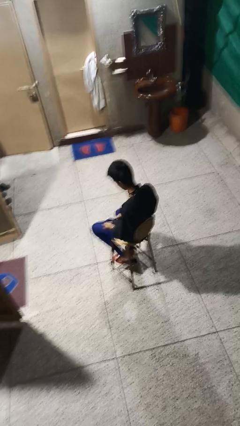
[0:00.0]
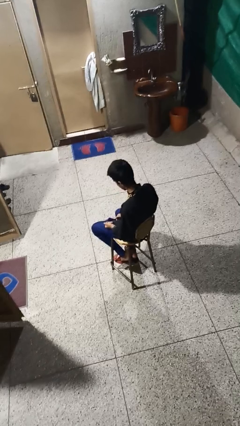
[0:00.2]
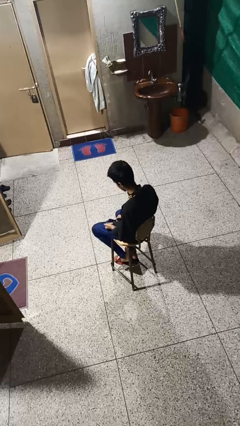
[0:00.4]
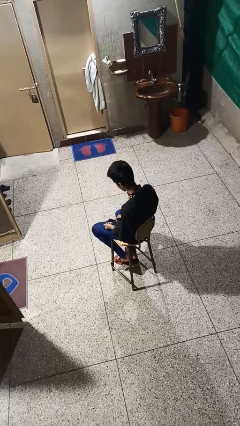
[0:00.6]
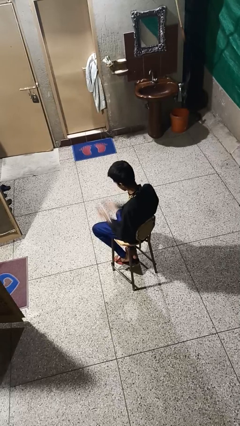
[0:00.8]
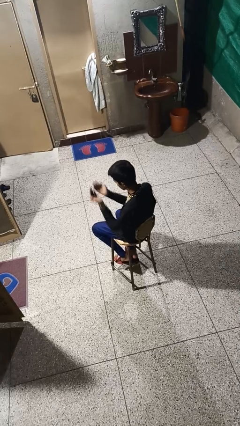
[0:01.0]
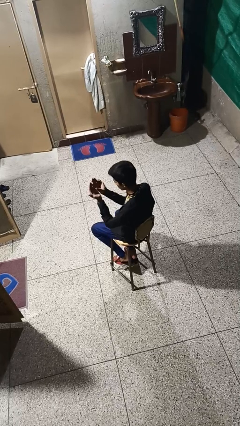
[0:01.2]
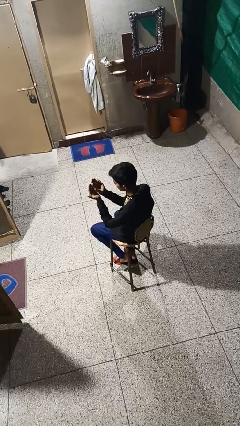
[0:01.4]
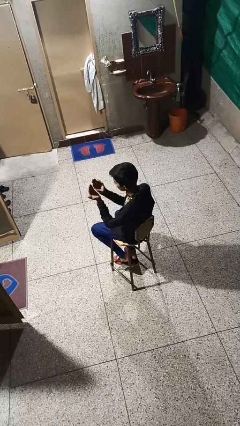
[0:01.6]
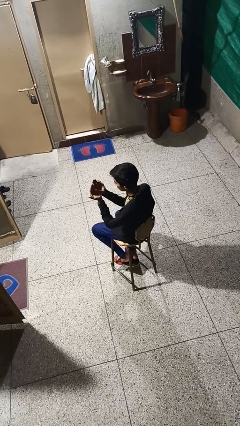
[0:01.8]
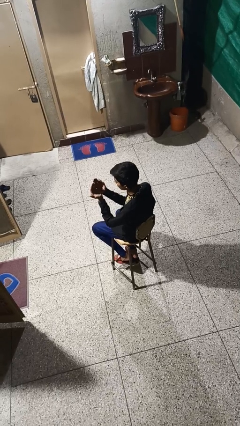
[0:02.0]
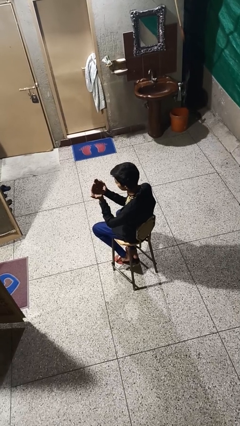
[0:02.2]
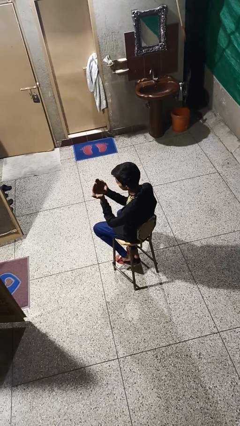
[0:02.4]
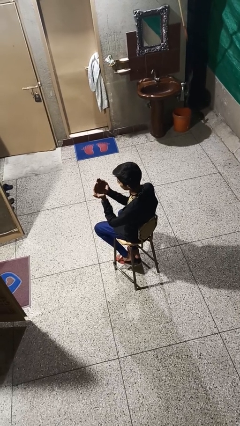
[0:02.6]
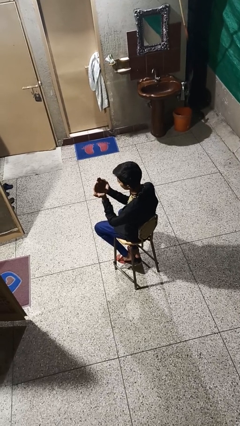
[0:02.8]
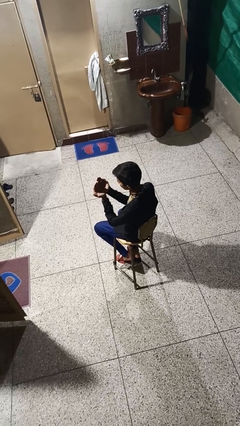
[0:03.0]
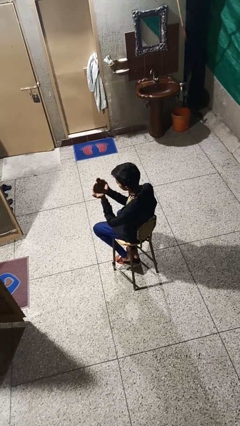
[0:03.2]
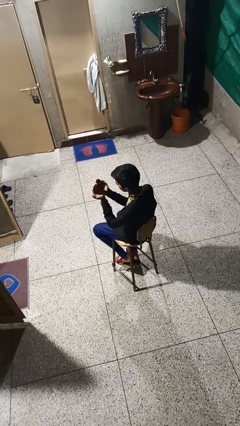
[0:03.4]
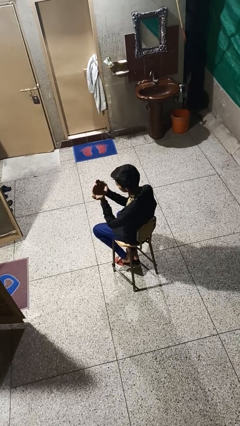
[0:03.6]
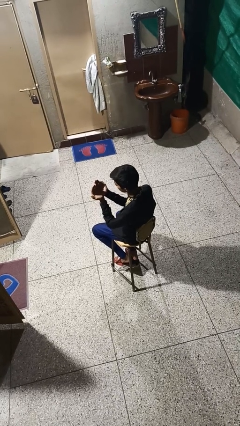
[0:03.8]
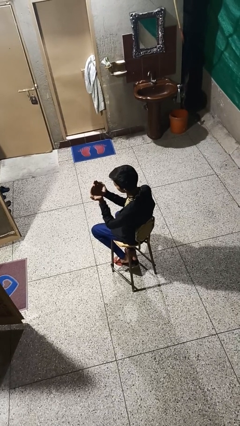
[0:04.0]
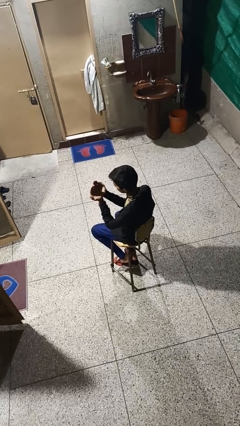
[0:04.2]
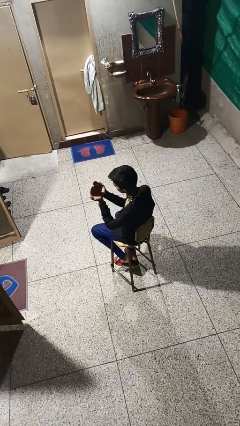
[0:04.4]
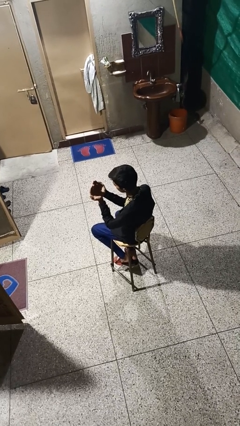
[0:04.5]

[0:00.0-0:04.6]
person prays

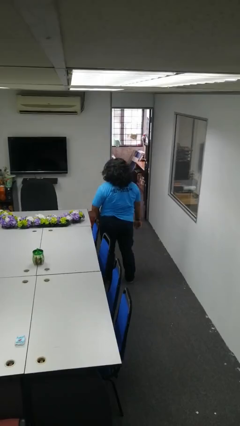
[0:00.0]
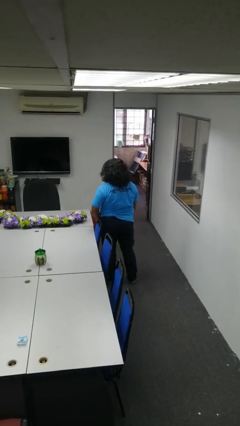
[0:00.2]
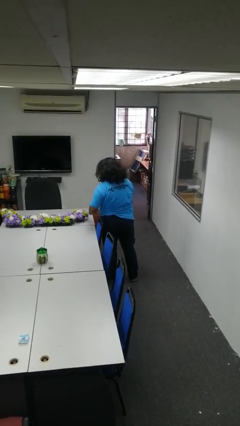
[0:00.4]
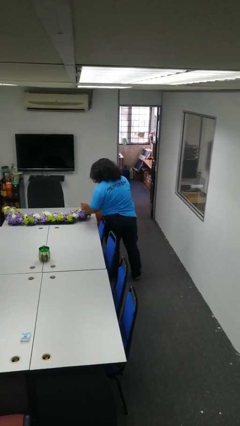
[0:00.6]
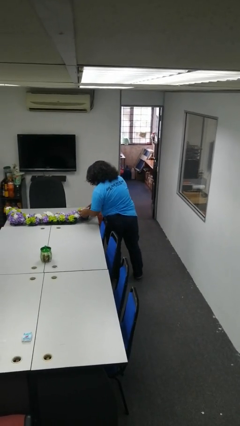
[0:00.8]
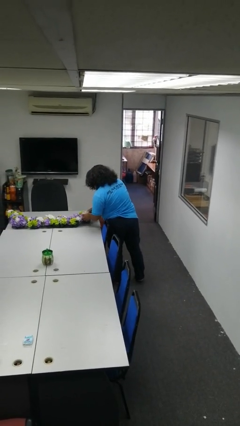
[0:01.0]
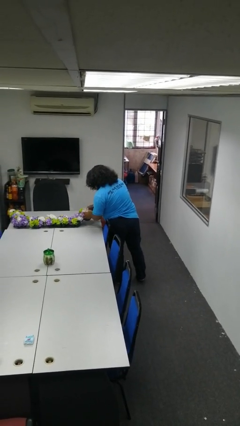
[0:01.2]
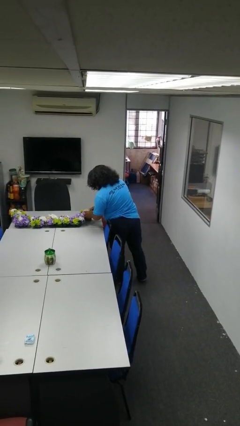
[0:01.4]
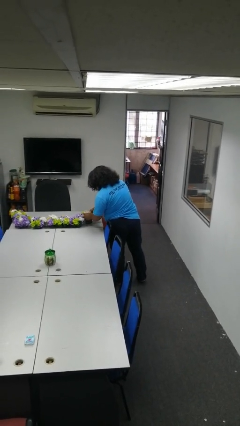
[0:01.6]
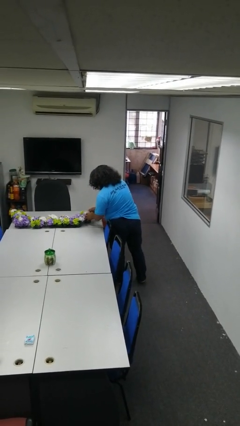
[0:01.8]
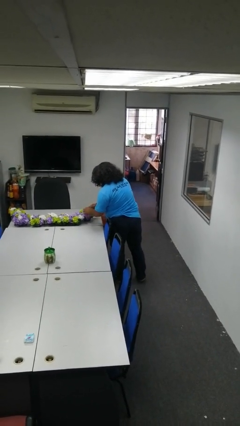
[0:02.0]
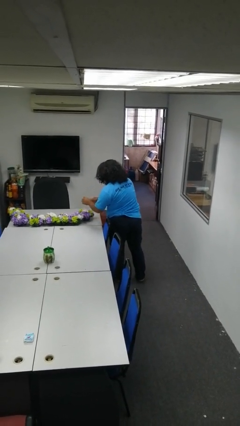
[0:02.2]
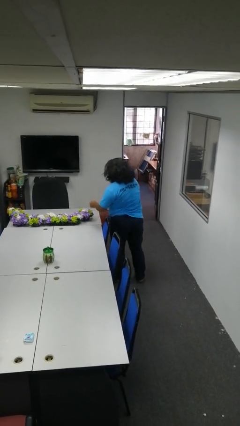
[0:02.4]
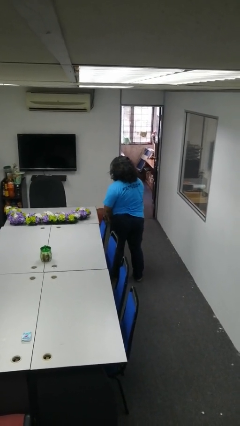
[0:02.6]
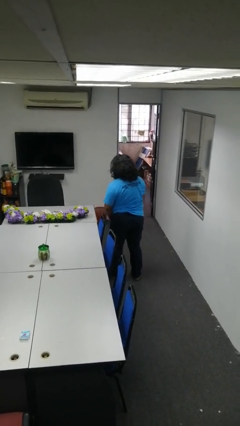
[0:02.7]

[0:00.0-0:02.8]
person arranges flowers in vase

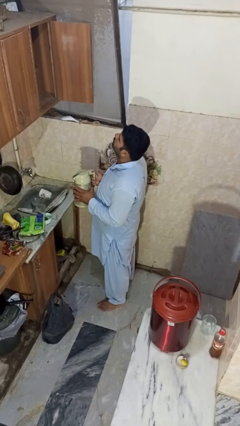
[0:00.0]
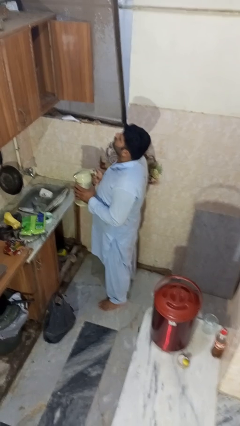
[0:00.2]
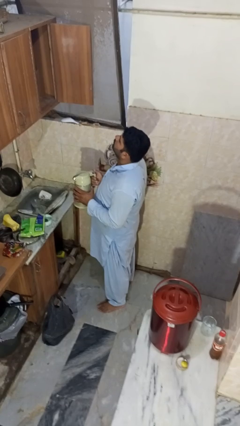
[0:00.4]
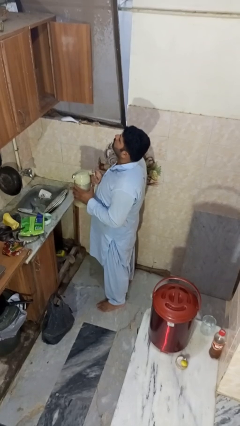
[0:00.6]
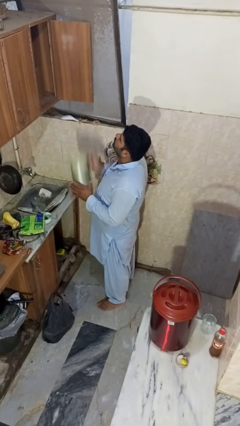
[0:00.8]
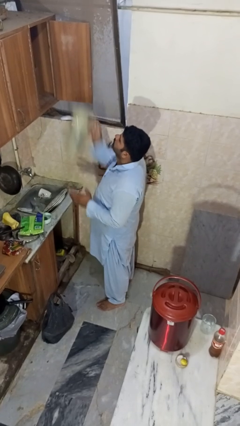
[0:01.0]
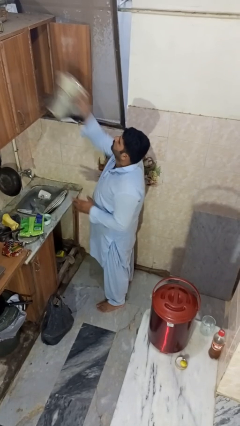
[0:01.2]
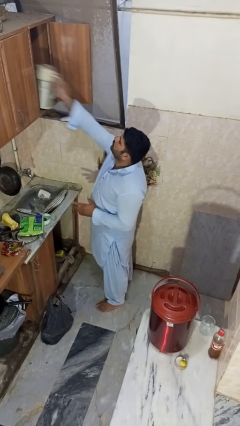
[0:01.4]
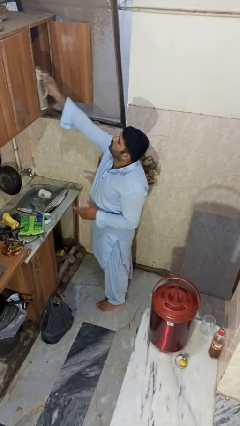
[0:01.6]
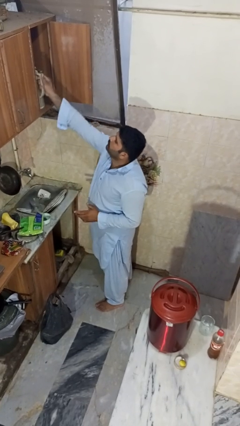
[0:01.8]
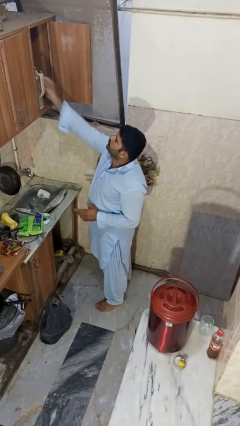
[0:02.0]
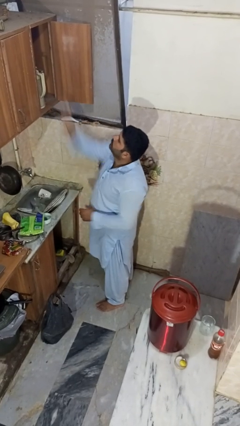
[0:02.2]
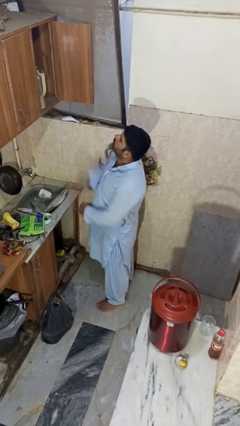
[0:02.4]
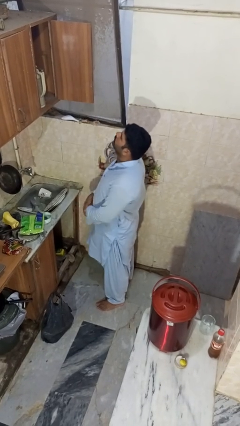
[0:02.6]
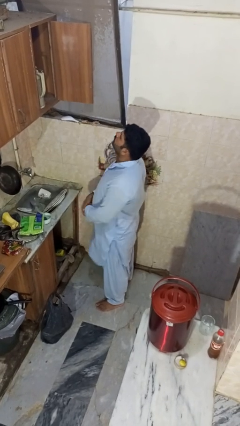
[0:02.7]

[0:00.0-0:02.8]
person puts object in cabinet

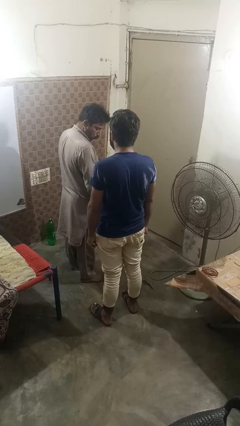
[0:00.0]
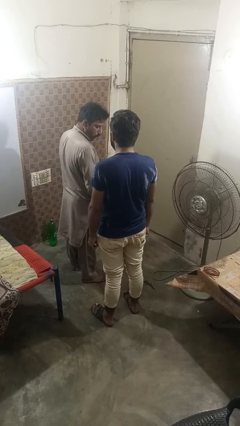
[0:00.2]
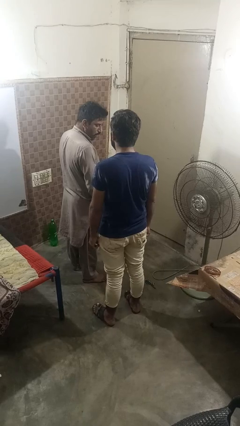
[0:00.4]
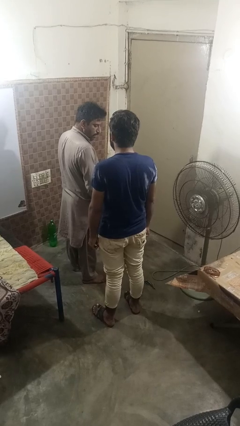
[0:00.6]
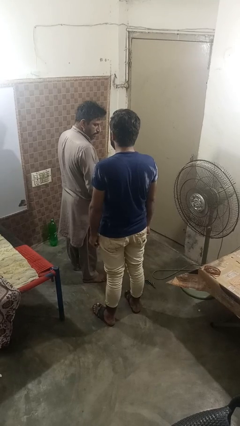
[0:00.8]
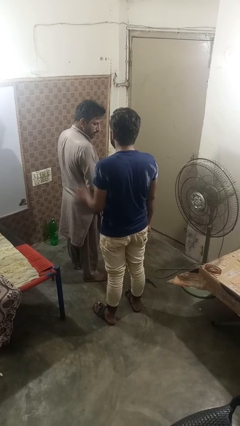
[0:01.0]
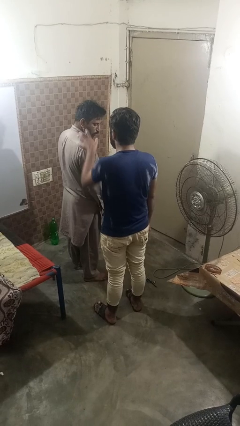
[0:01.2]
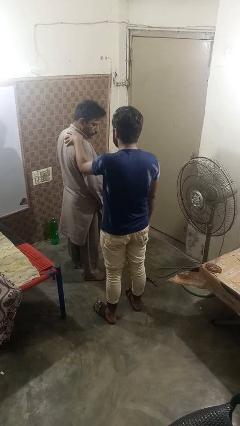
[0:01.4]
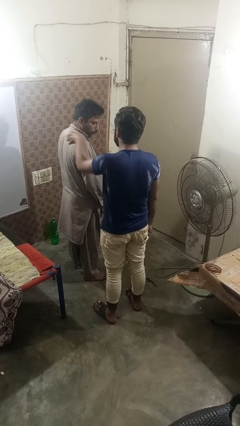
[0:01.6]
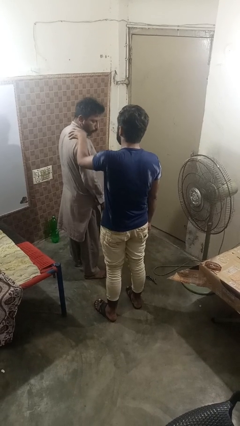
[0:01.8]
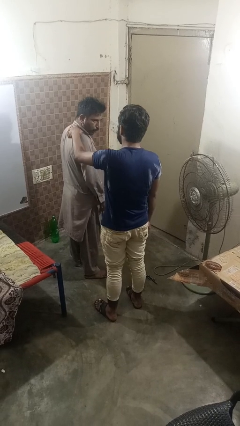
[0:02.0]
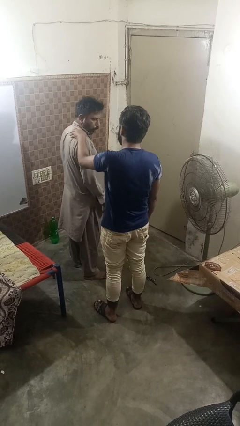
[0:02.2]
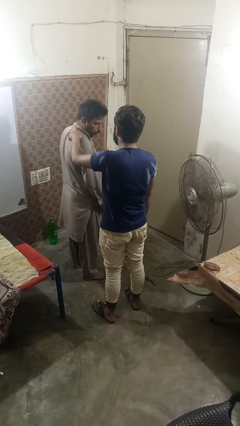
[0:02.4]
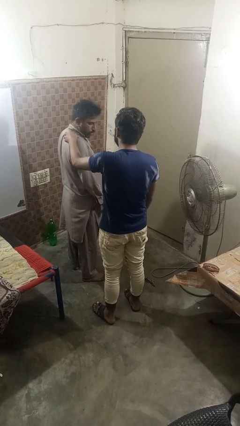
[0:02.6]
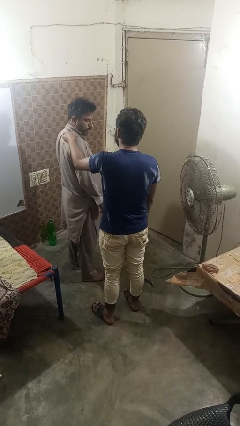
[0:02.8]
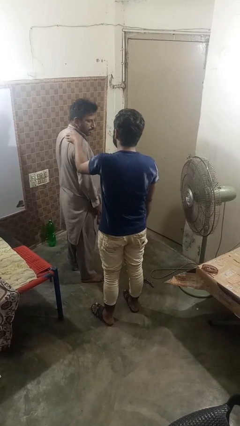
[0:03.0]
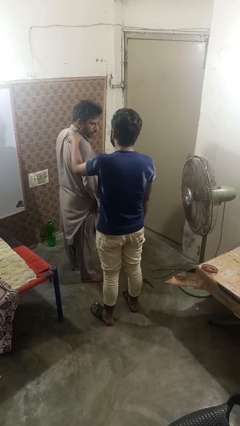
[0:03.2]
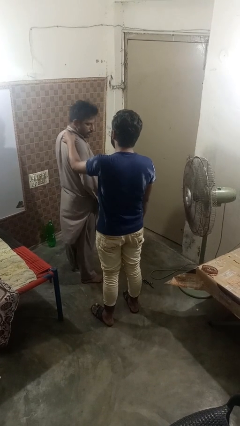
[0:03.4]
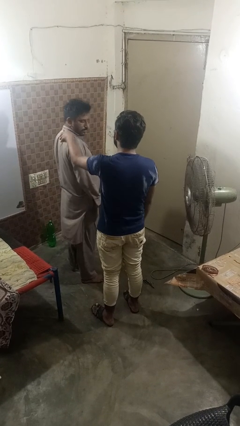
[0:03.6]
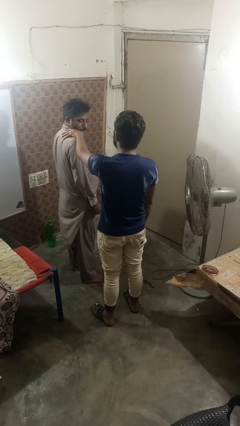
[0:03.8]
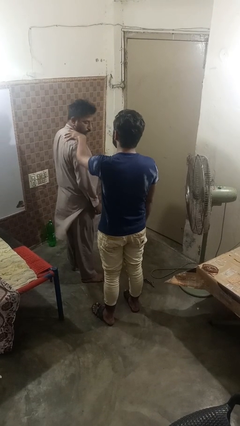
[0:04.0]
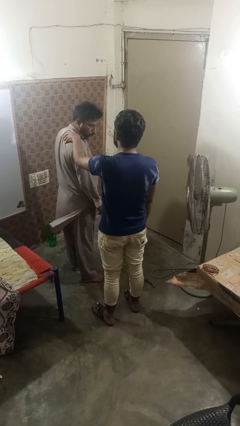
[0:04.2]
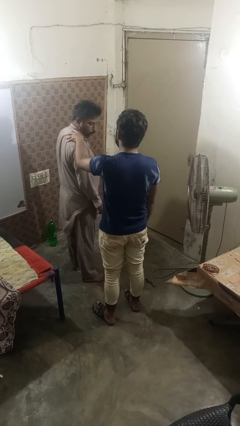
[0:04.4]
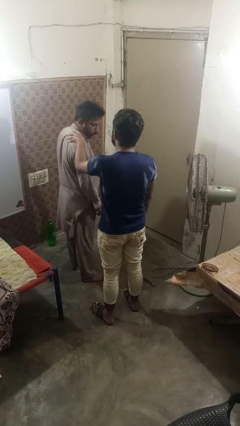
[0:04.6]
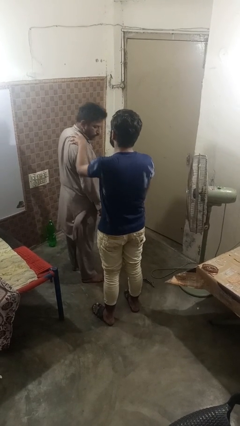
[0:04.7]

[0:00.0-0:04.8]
person grabs person by shoulder

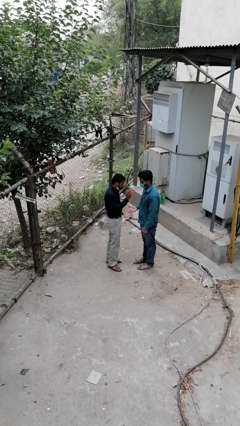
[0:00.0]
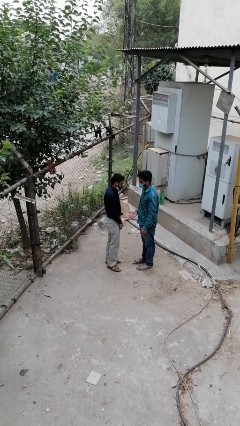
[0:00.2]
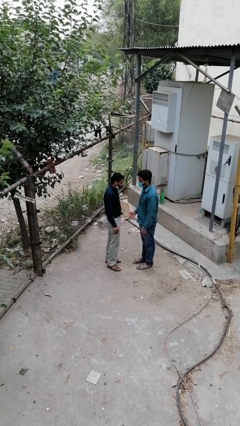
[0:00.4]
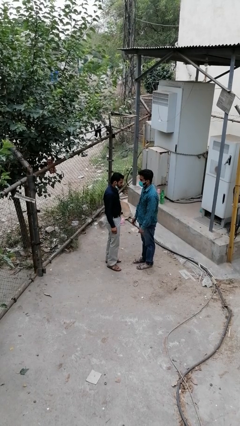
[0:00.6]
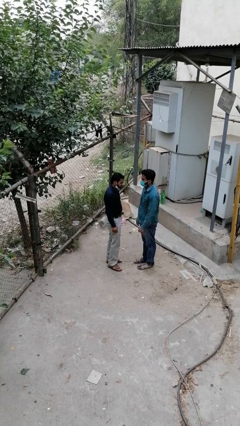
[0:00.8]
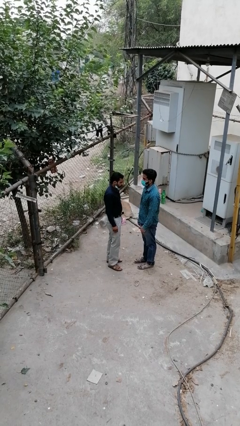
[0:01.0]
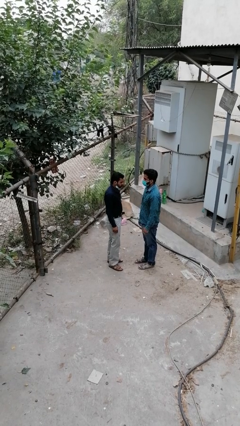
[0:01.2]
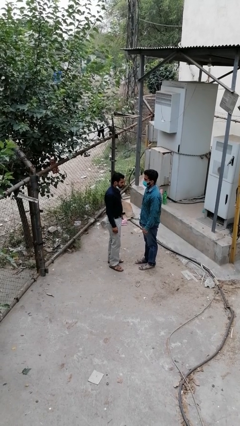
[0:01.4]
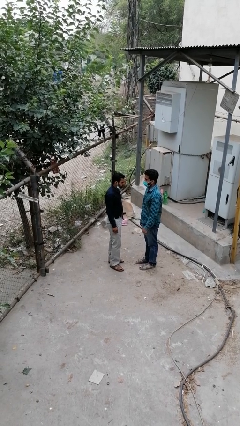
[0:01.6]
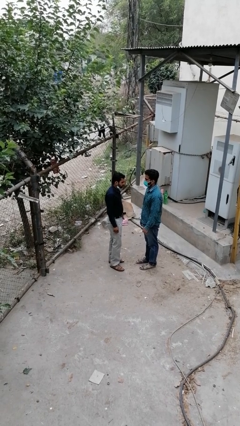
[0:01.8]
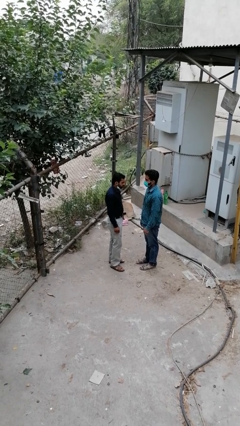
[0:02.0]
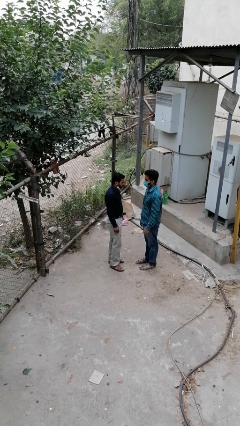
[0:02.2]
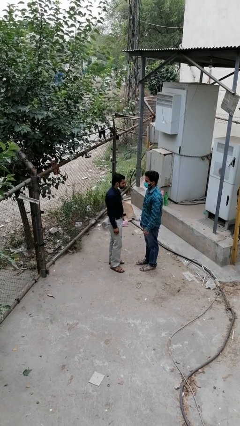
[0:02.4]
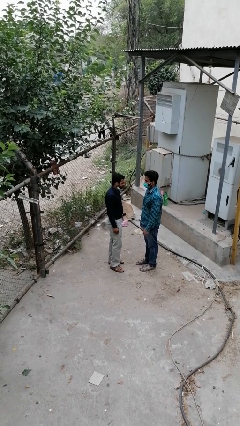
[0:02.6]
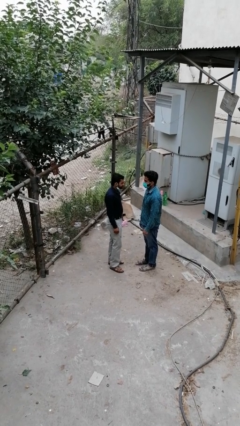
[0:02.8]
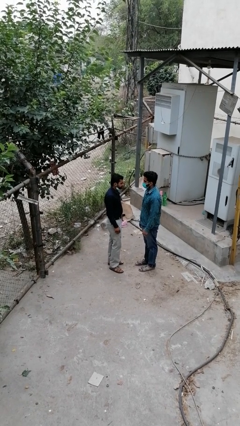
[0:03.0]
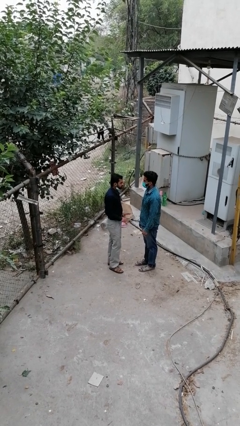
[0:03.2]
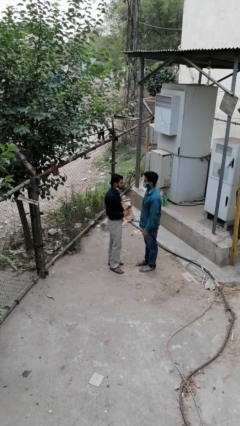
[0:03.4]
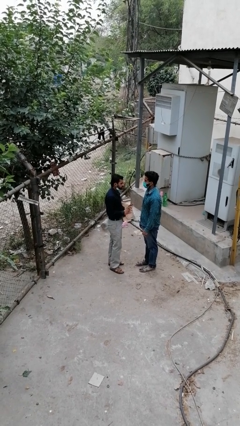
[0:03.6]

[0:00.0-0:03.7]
person highfives hand
